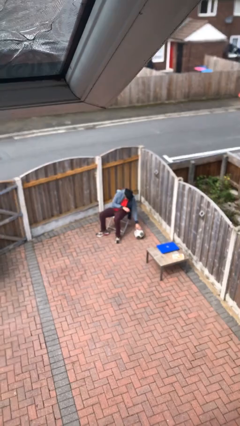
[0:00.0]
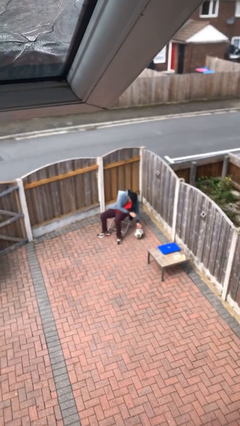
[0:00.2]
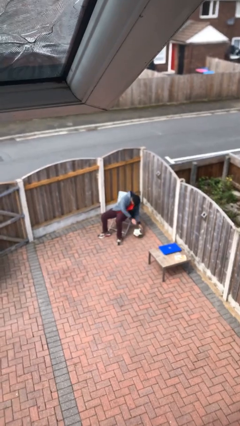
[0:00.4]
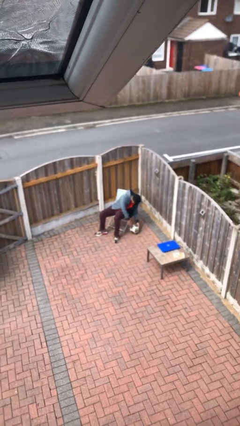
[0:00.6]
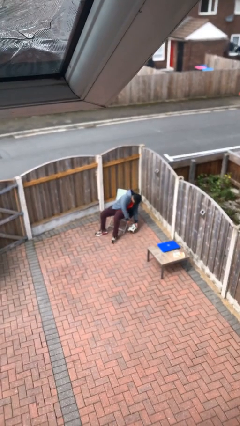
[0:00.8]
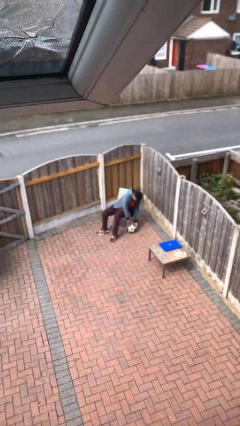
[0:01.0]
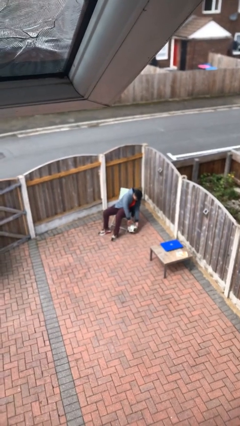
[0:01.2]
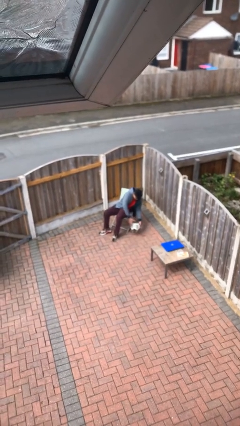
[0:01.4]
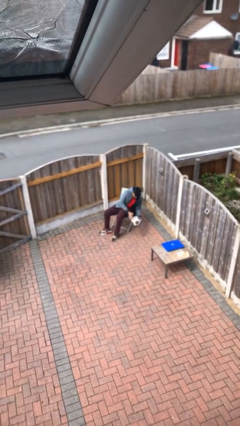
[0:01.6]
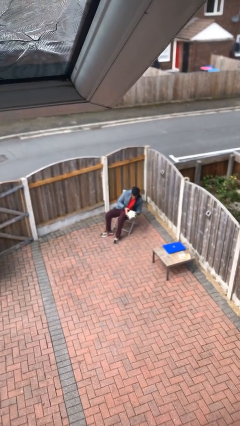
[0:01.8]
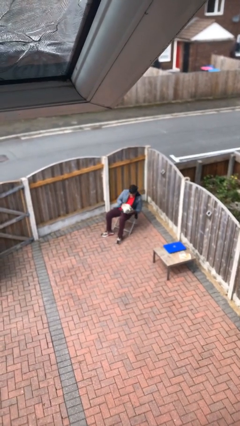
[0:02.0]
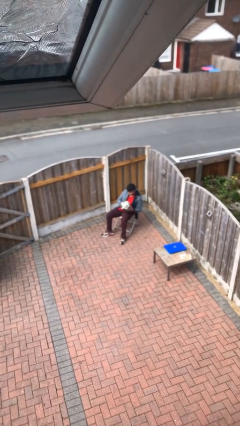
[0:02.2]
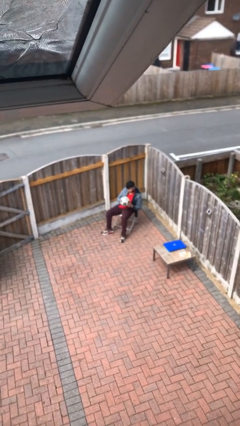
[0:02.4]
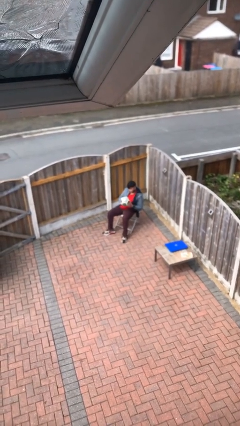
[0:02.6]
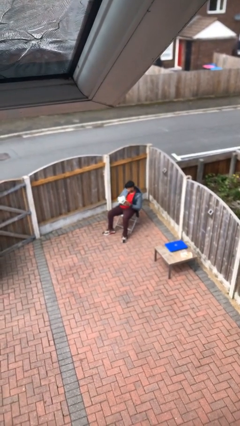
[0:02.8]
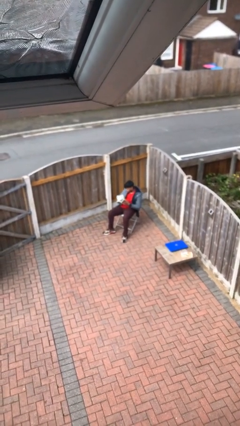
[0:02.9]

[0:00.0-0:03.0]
person picks up object from floor

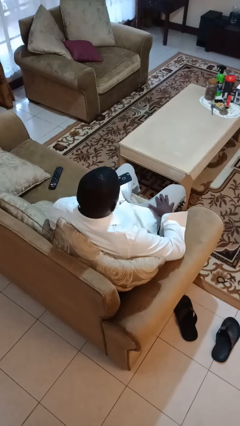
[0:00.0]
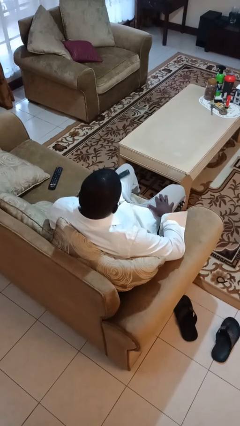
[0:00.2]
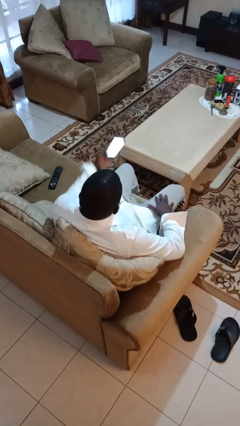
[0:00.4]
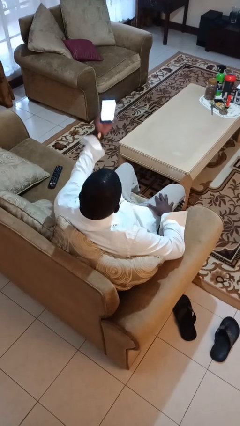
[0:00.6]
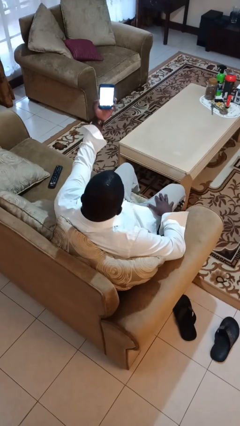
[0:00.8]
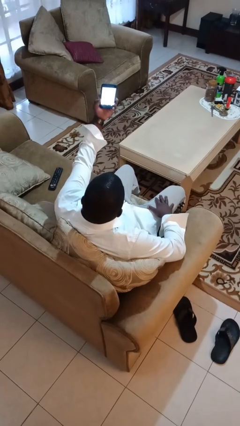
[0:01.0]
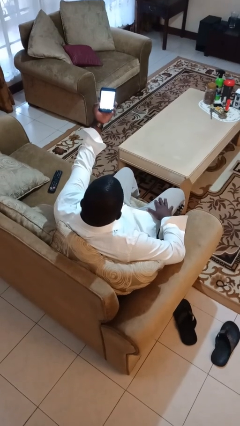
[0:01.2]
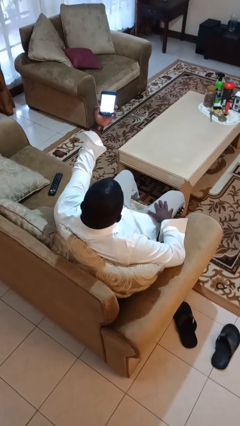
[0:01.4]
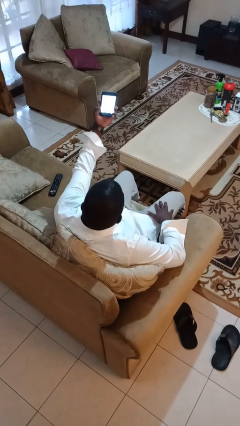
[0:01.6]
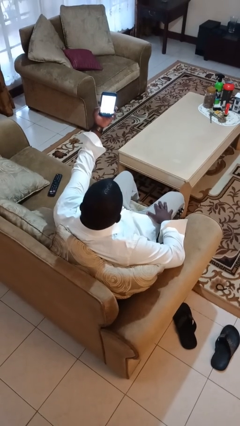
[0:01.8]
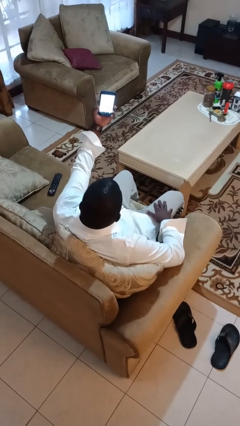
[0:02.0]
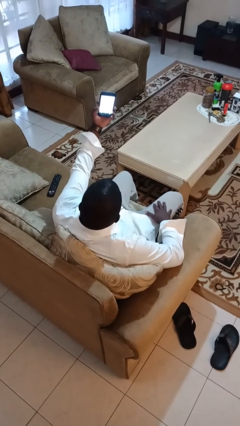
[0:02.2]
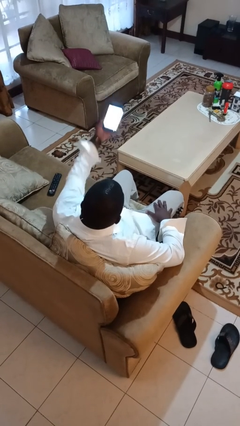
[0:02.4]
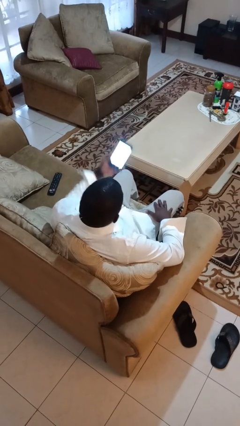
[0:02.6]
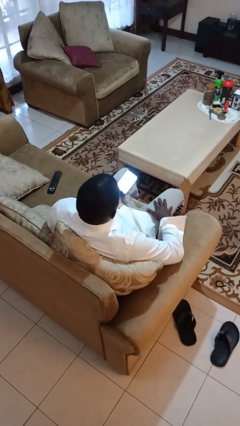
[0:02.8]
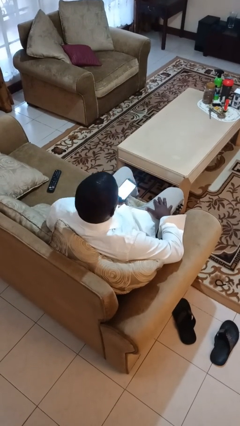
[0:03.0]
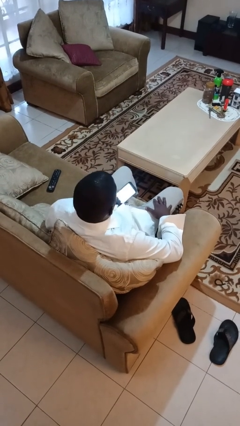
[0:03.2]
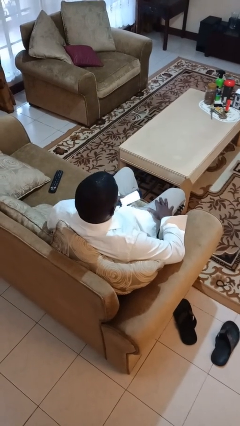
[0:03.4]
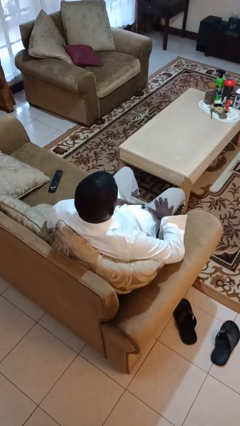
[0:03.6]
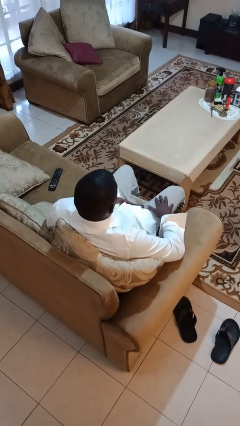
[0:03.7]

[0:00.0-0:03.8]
person takes selfie

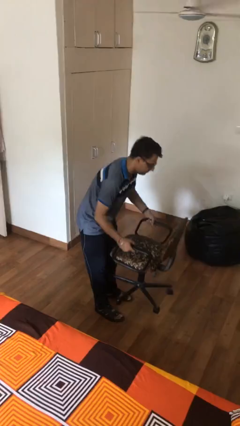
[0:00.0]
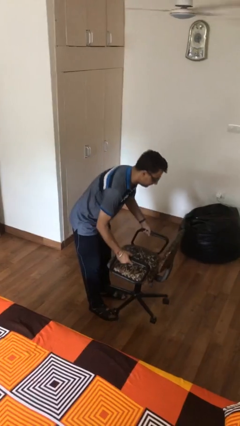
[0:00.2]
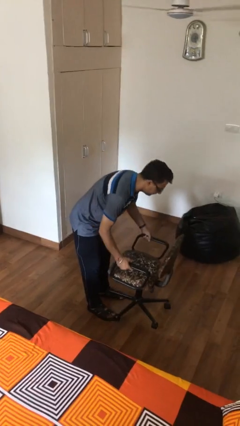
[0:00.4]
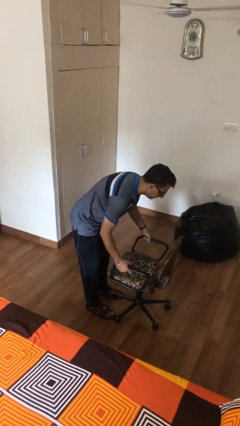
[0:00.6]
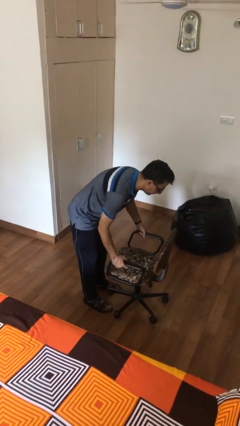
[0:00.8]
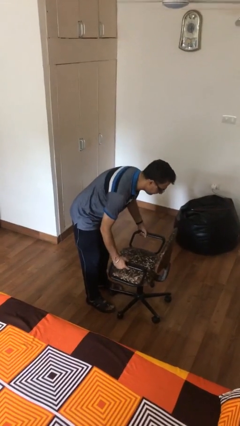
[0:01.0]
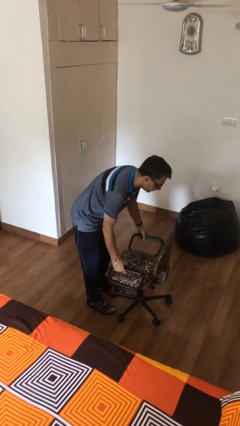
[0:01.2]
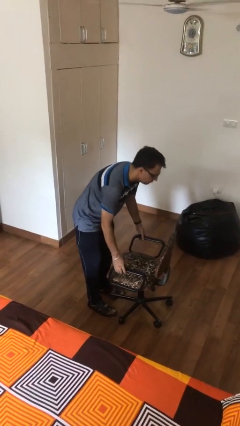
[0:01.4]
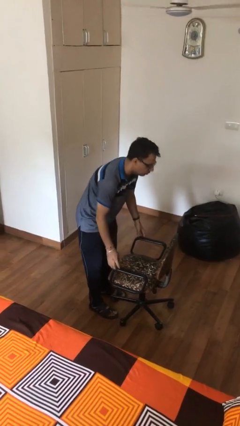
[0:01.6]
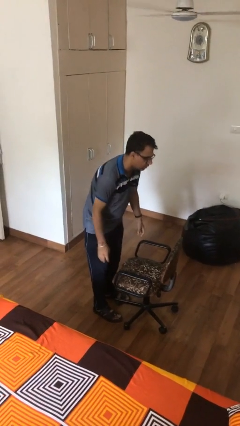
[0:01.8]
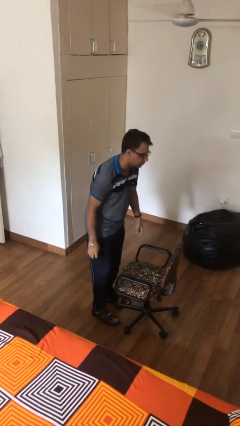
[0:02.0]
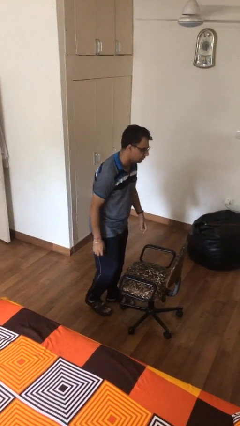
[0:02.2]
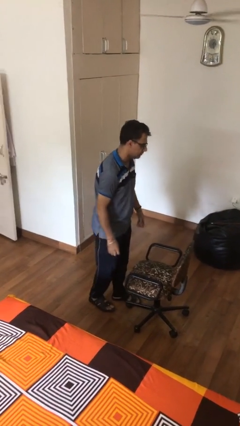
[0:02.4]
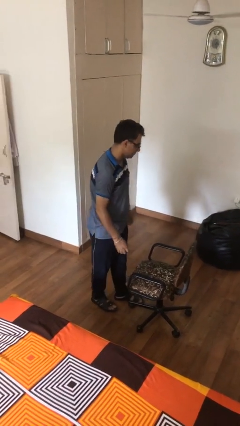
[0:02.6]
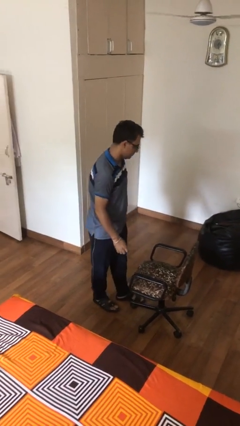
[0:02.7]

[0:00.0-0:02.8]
person puts down object on floor

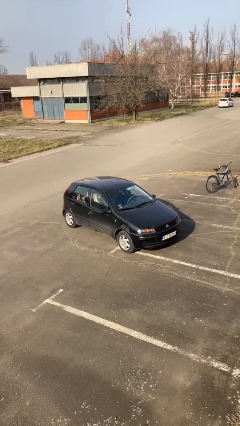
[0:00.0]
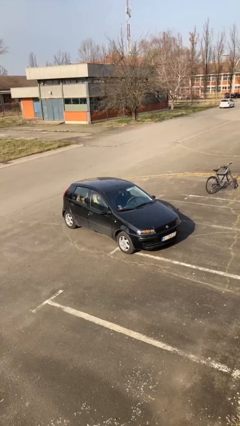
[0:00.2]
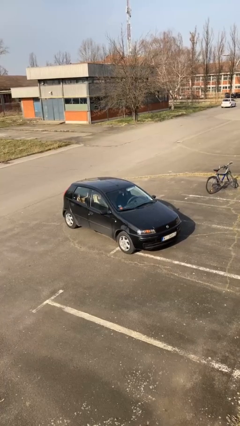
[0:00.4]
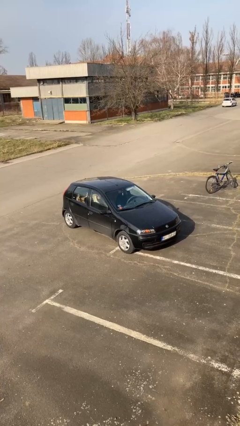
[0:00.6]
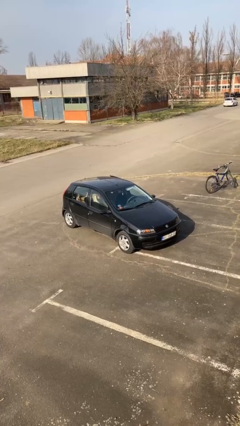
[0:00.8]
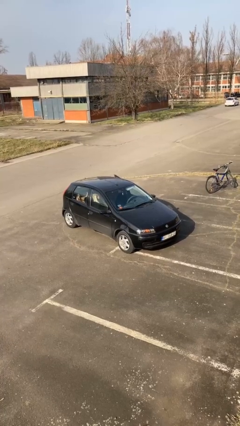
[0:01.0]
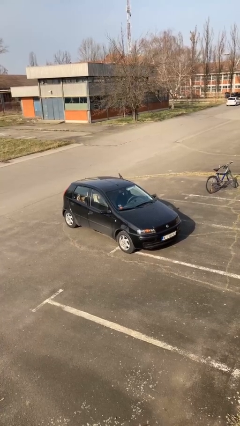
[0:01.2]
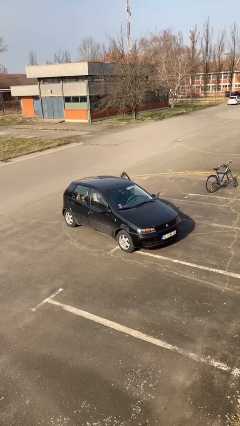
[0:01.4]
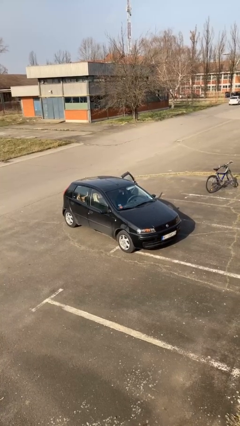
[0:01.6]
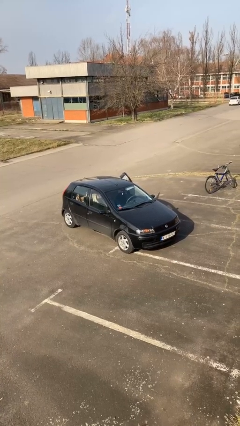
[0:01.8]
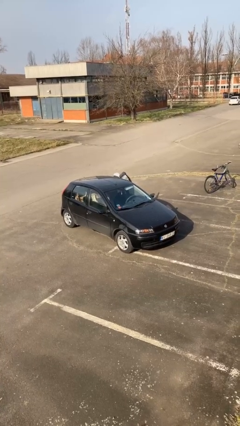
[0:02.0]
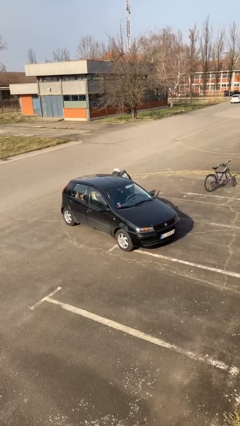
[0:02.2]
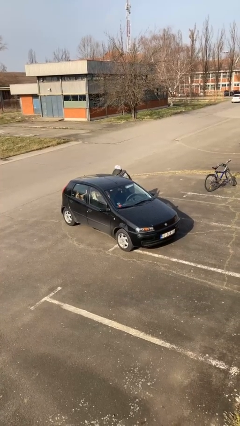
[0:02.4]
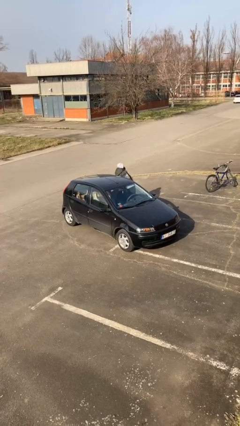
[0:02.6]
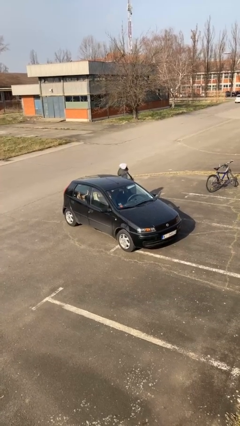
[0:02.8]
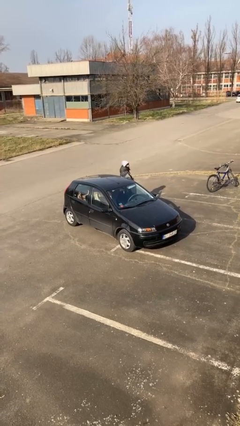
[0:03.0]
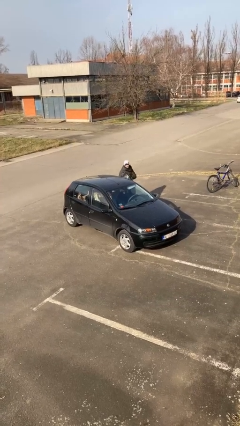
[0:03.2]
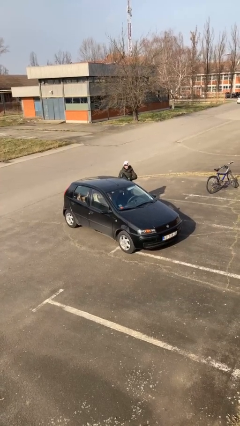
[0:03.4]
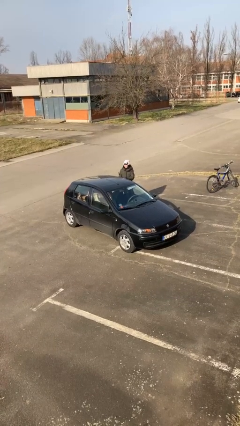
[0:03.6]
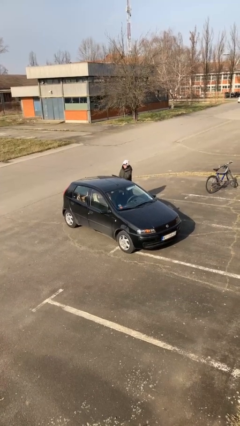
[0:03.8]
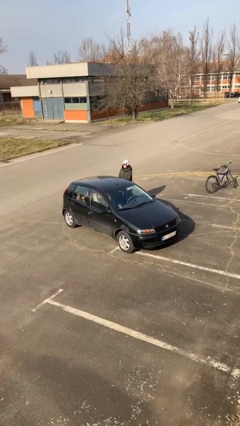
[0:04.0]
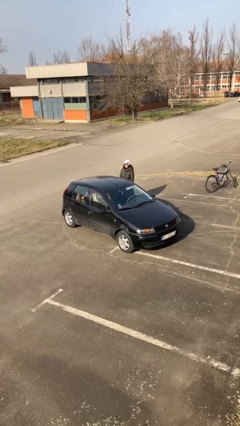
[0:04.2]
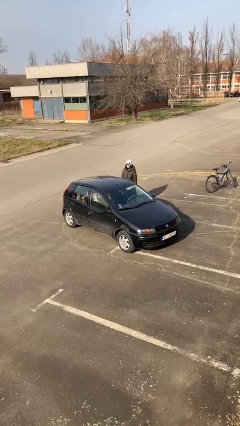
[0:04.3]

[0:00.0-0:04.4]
car drops off person

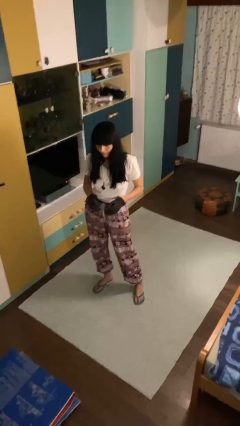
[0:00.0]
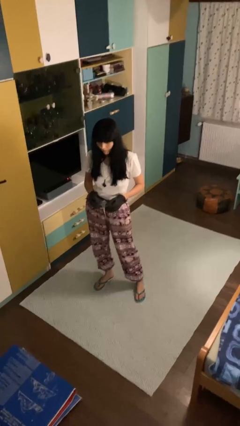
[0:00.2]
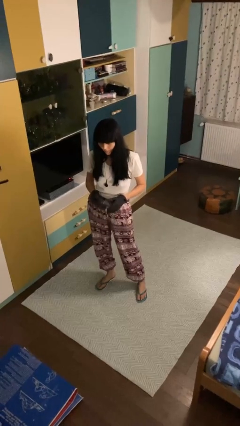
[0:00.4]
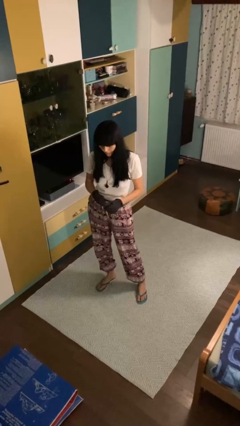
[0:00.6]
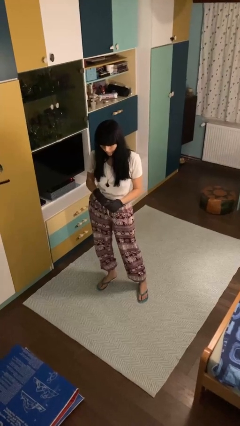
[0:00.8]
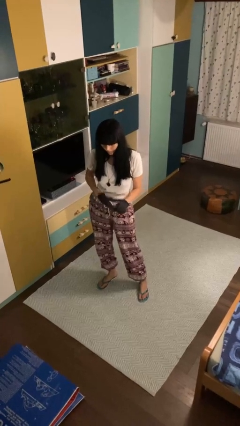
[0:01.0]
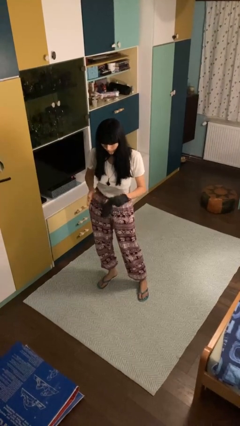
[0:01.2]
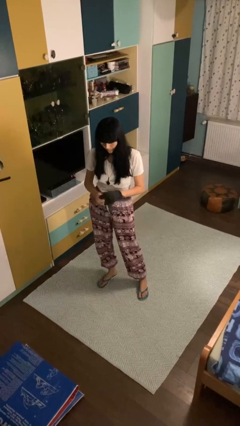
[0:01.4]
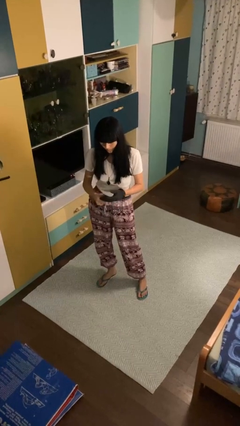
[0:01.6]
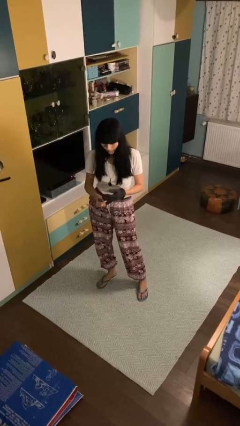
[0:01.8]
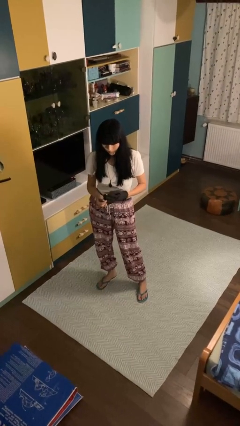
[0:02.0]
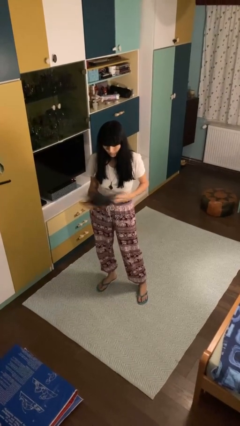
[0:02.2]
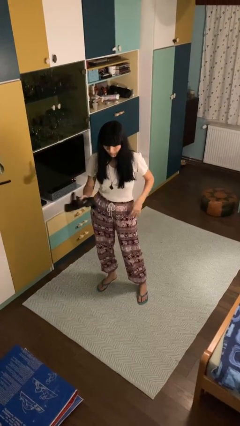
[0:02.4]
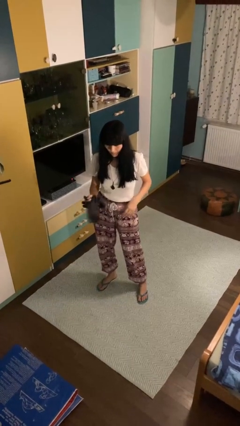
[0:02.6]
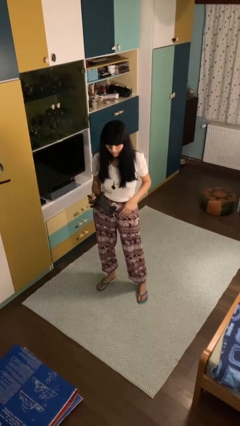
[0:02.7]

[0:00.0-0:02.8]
person takes off gloves

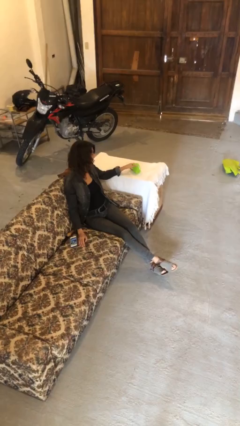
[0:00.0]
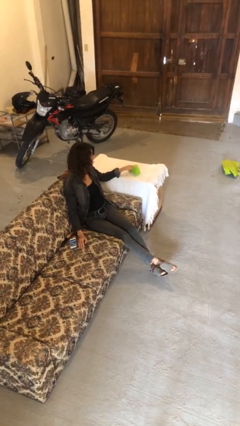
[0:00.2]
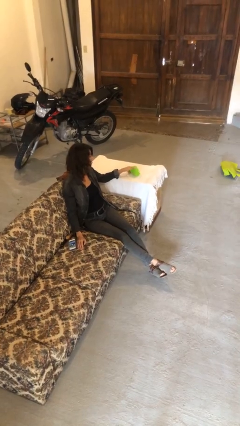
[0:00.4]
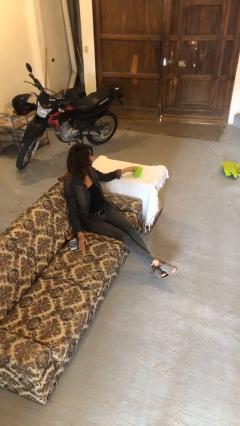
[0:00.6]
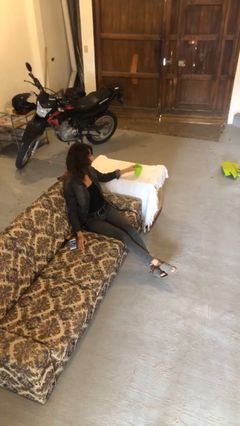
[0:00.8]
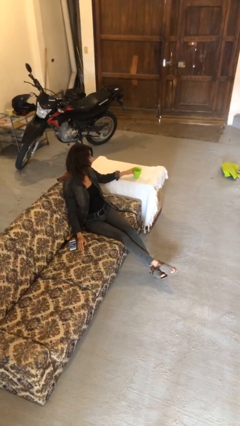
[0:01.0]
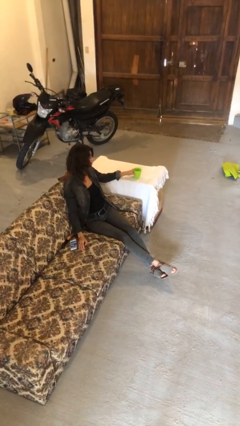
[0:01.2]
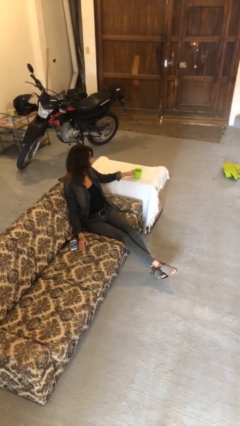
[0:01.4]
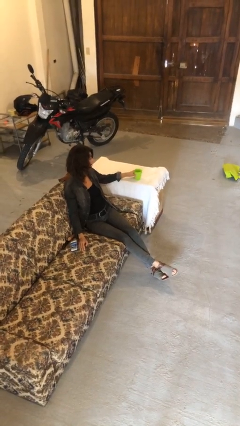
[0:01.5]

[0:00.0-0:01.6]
person sets upright glass
